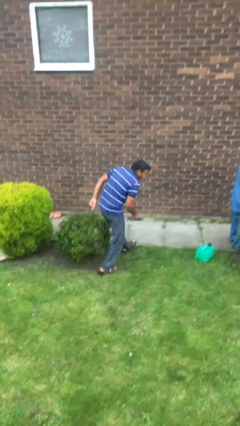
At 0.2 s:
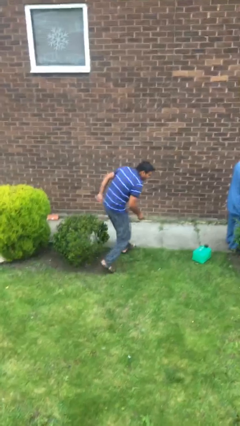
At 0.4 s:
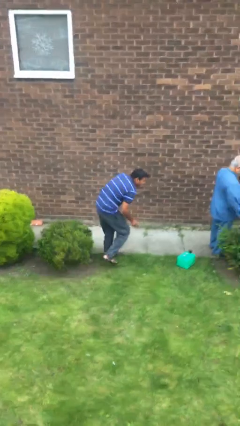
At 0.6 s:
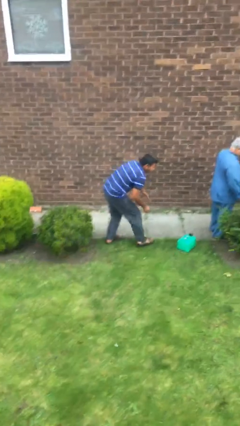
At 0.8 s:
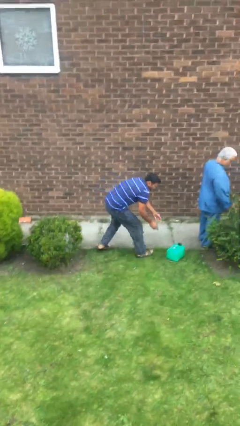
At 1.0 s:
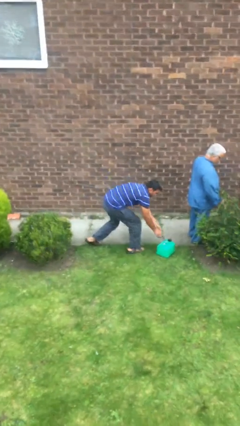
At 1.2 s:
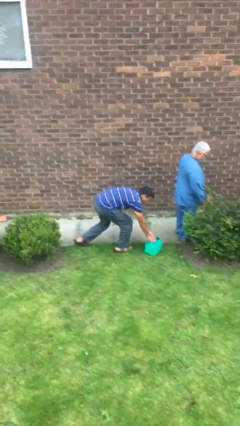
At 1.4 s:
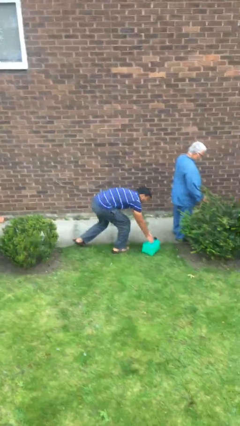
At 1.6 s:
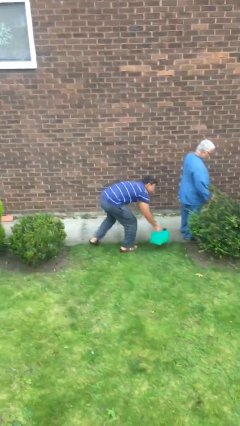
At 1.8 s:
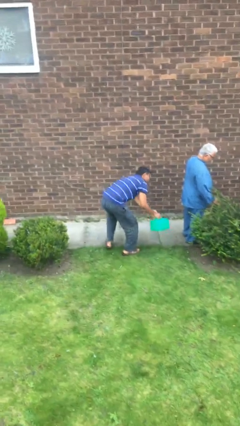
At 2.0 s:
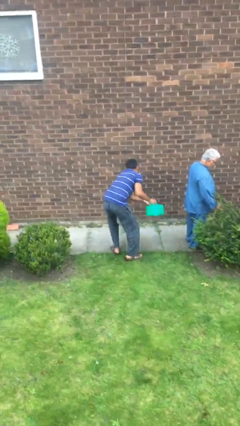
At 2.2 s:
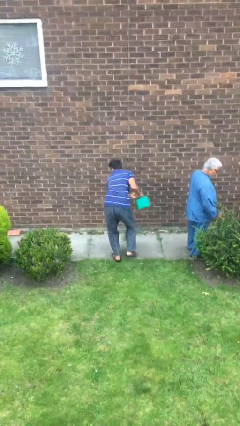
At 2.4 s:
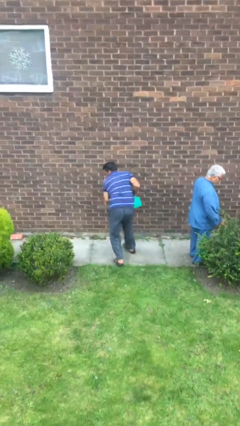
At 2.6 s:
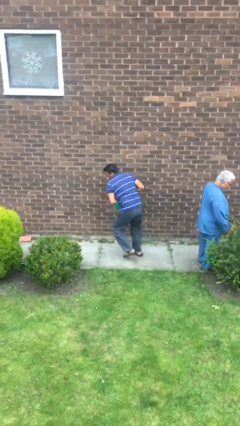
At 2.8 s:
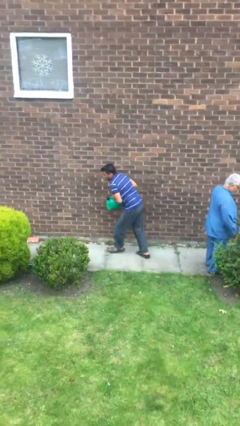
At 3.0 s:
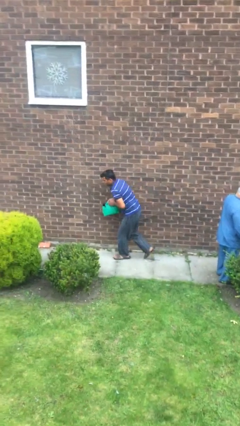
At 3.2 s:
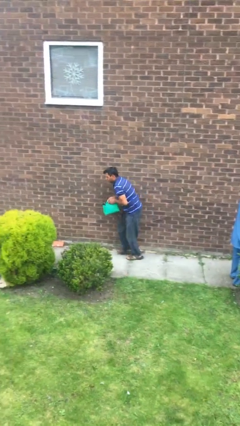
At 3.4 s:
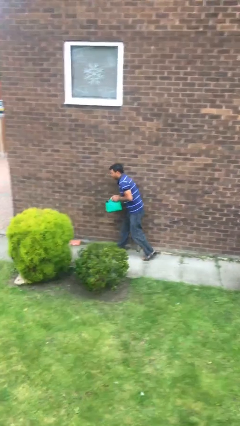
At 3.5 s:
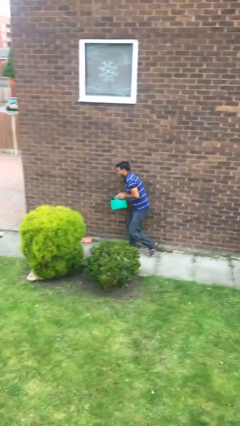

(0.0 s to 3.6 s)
person steals object from person

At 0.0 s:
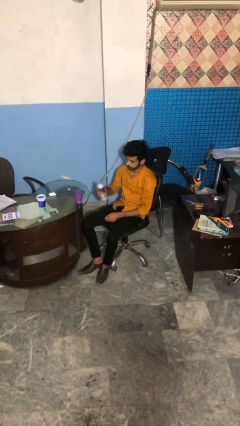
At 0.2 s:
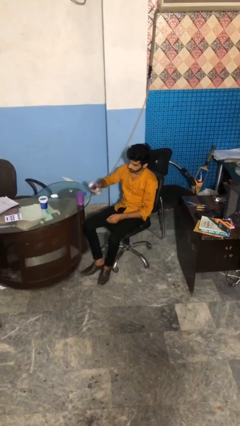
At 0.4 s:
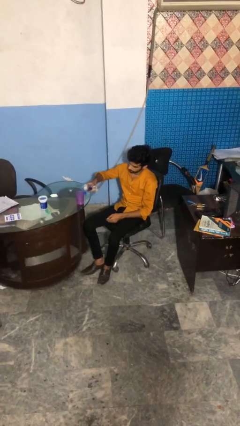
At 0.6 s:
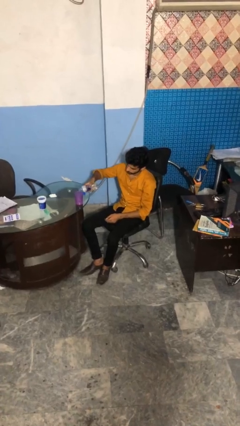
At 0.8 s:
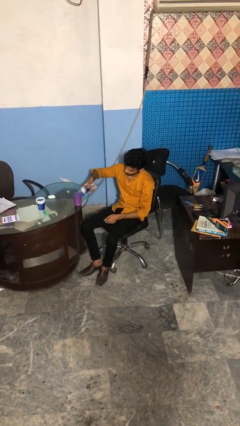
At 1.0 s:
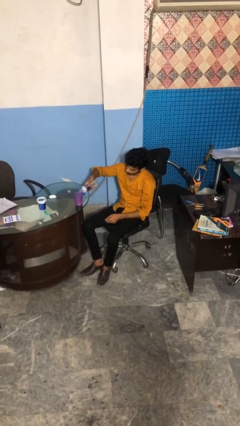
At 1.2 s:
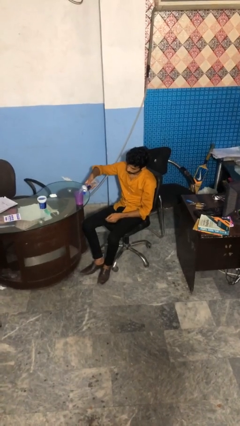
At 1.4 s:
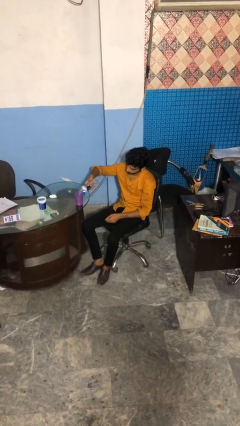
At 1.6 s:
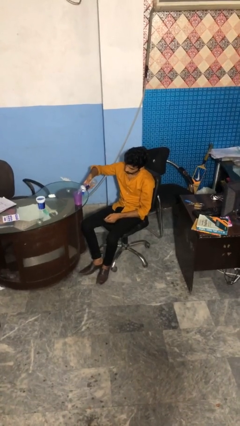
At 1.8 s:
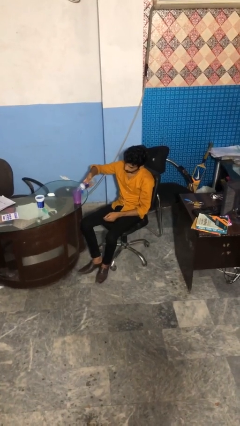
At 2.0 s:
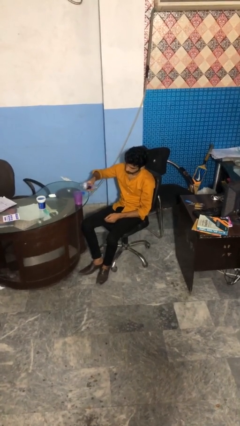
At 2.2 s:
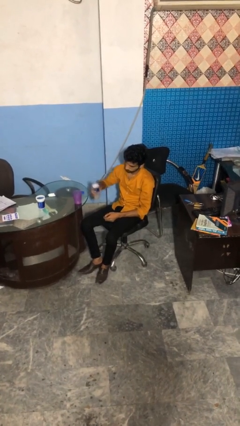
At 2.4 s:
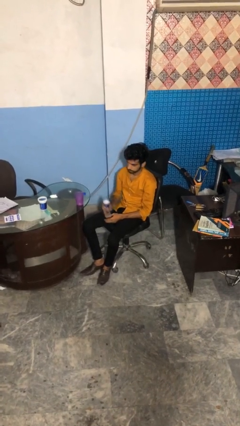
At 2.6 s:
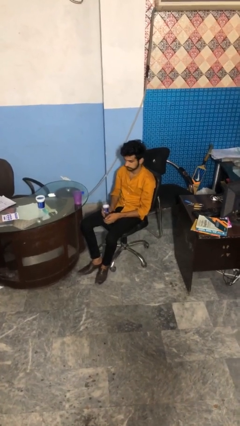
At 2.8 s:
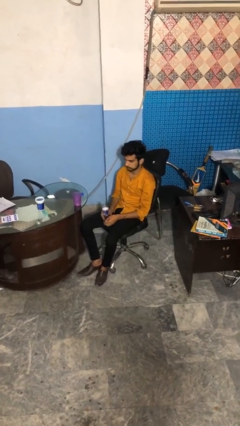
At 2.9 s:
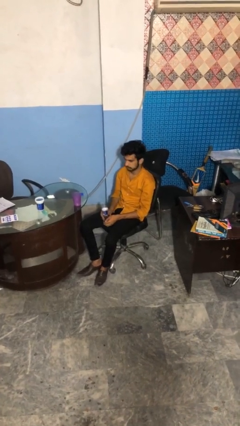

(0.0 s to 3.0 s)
person pours liquid into cup

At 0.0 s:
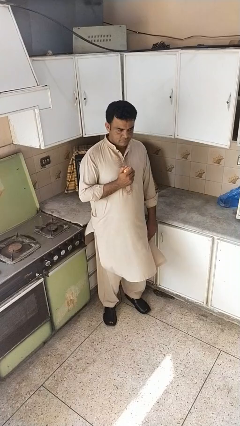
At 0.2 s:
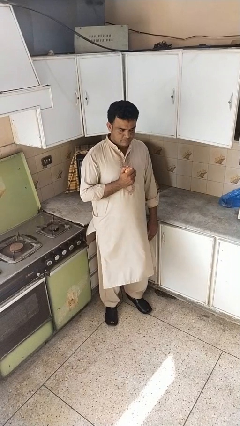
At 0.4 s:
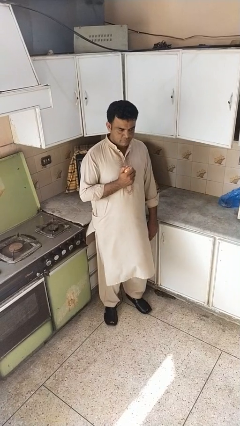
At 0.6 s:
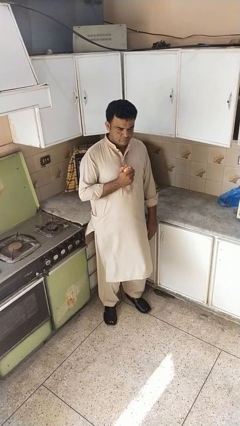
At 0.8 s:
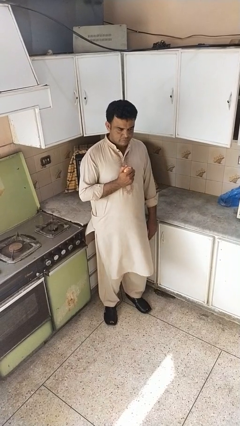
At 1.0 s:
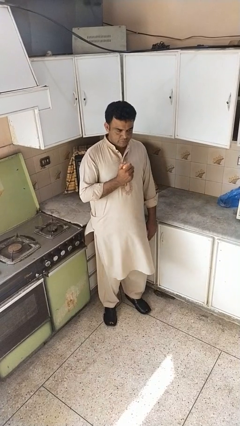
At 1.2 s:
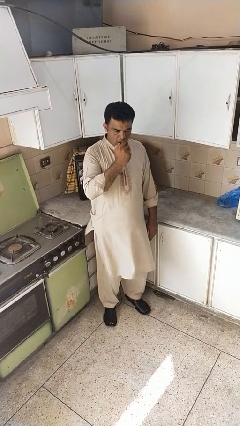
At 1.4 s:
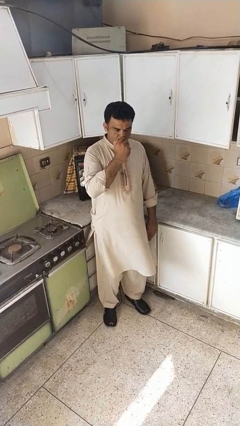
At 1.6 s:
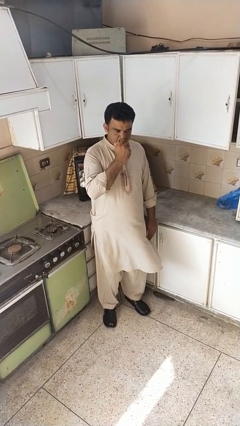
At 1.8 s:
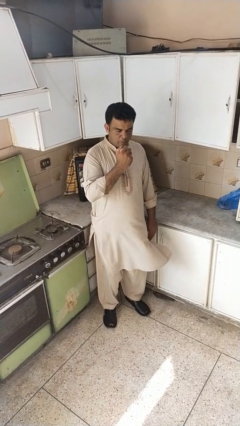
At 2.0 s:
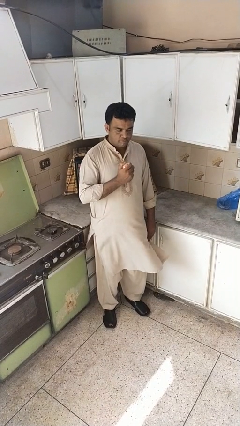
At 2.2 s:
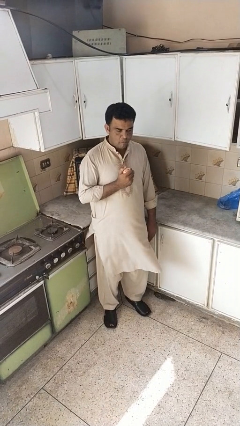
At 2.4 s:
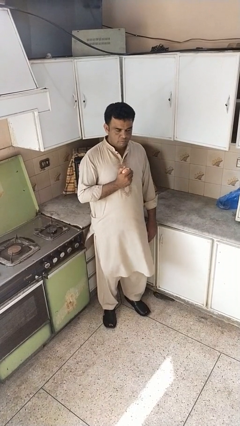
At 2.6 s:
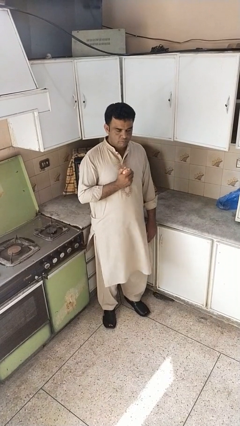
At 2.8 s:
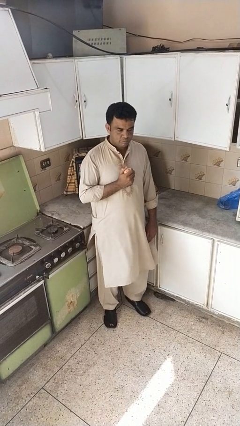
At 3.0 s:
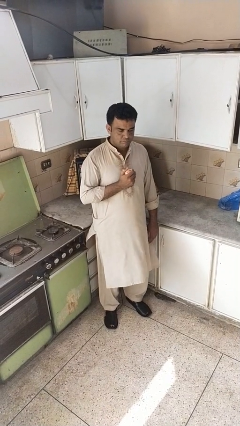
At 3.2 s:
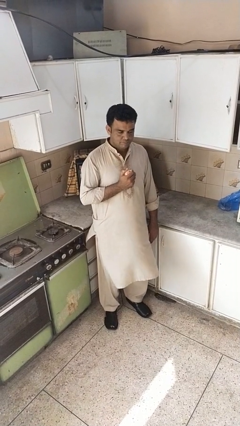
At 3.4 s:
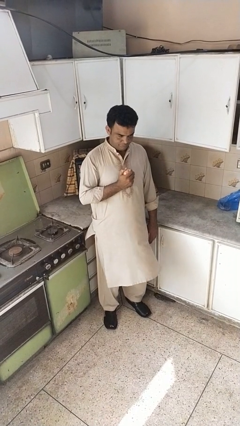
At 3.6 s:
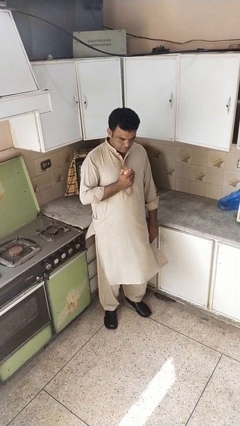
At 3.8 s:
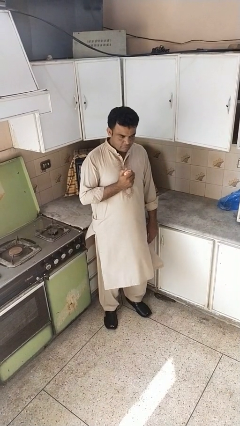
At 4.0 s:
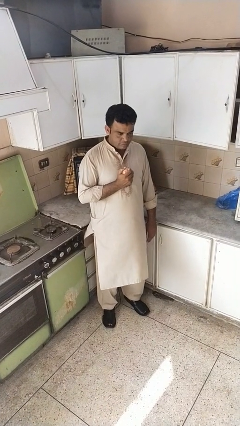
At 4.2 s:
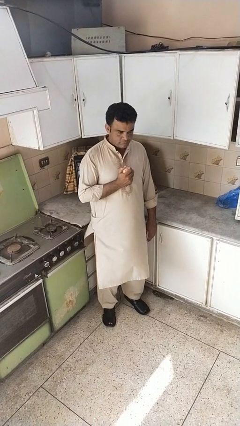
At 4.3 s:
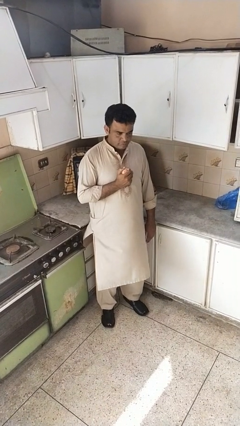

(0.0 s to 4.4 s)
person eats apple

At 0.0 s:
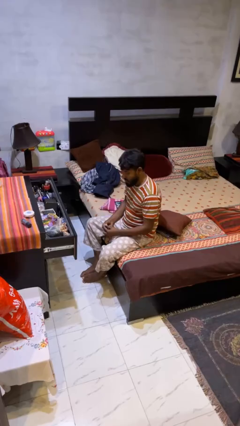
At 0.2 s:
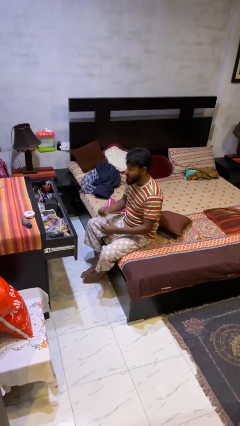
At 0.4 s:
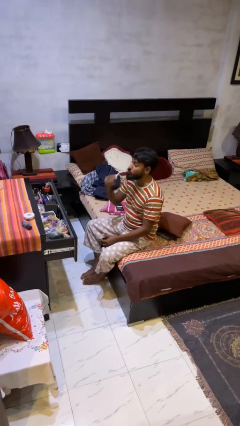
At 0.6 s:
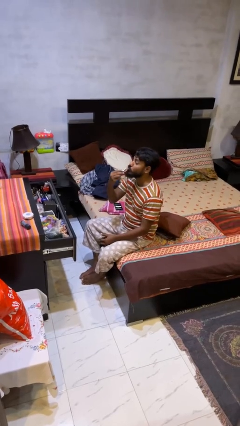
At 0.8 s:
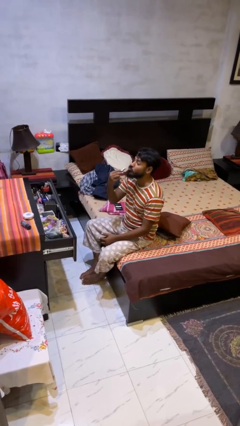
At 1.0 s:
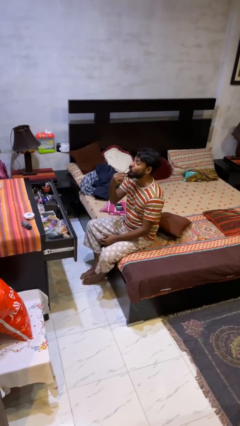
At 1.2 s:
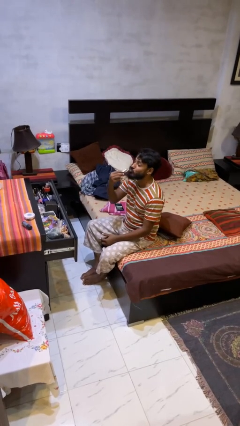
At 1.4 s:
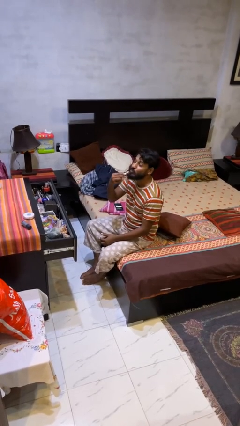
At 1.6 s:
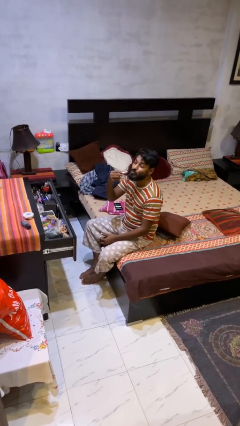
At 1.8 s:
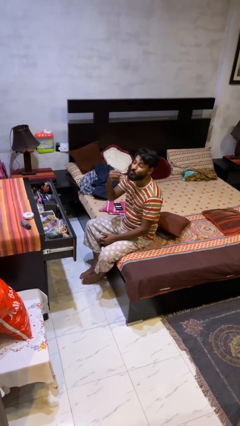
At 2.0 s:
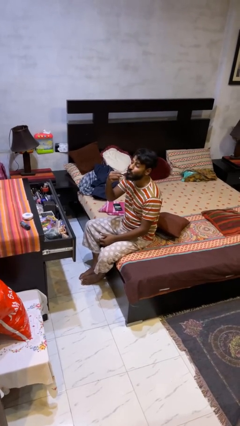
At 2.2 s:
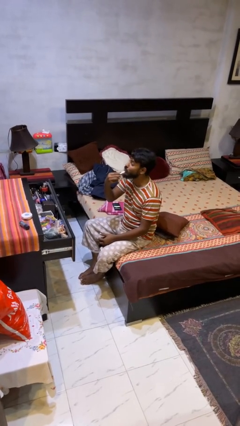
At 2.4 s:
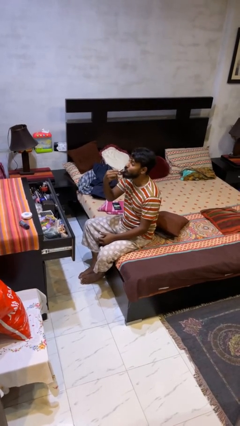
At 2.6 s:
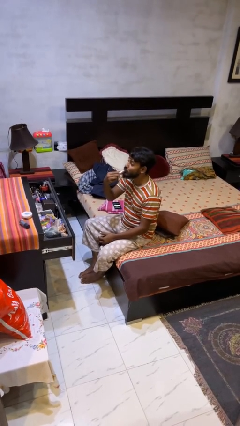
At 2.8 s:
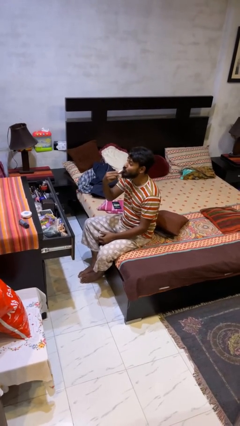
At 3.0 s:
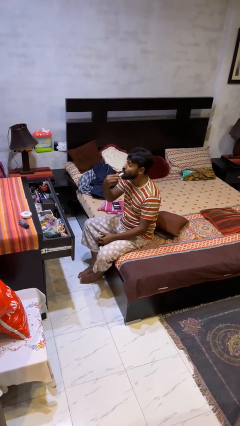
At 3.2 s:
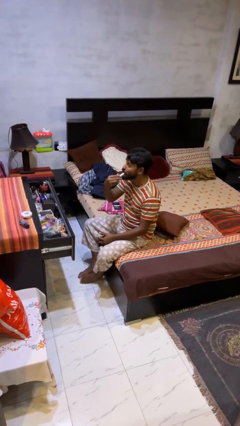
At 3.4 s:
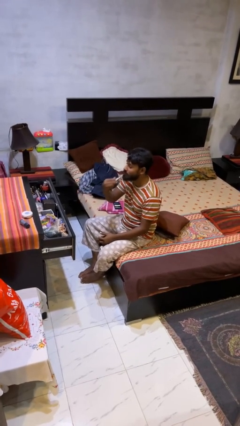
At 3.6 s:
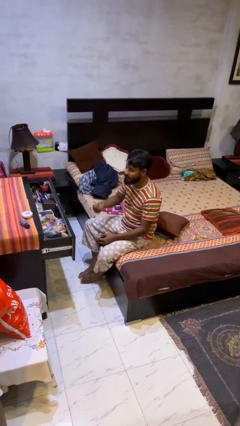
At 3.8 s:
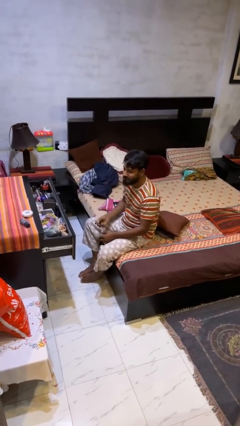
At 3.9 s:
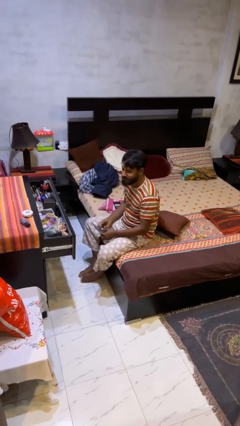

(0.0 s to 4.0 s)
person applies lip makeup

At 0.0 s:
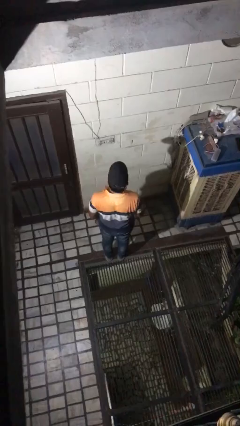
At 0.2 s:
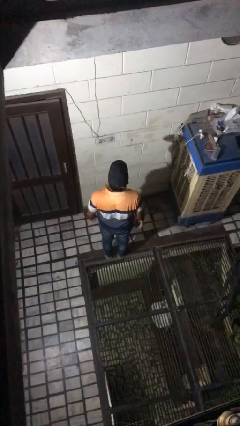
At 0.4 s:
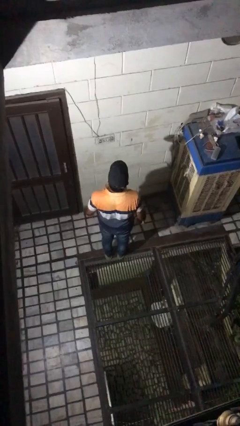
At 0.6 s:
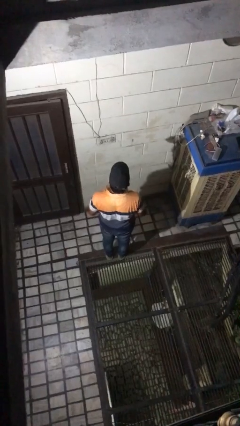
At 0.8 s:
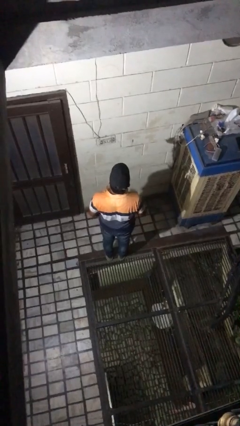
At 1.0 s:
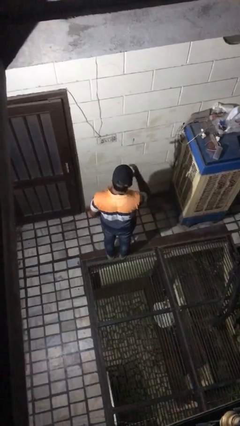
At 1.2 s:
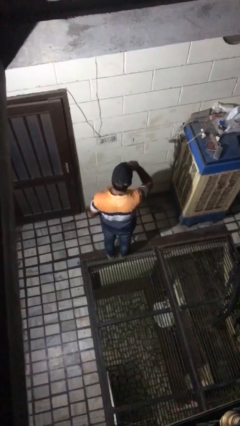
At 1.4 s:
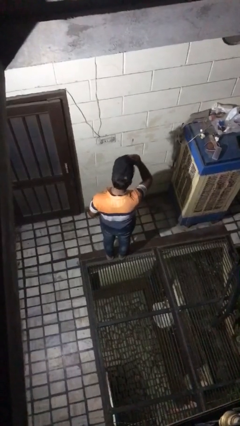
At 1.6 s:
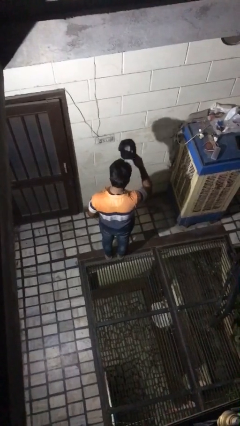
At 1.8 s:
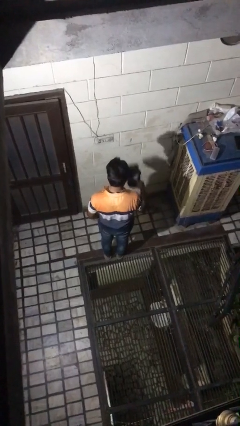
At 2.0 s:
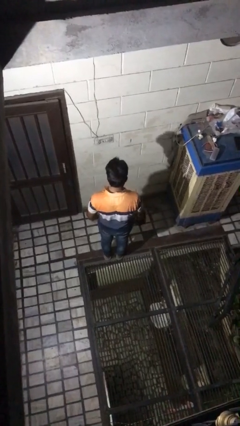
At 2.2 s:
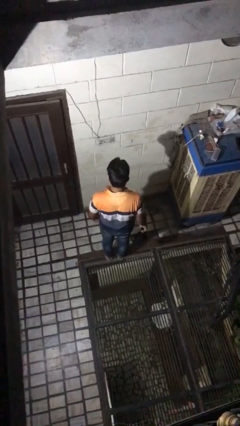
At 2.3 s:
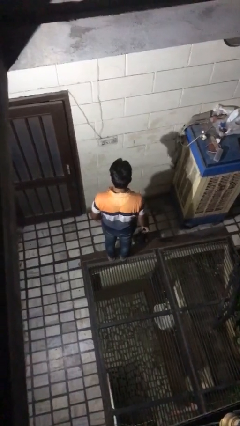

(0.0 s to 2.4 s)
person takes off hat

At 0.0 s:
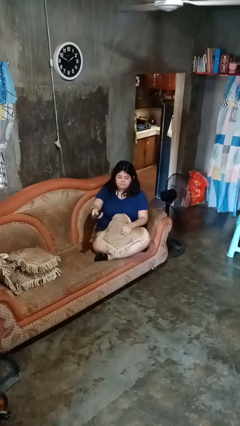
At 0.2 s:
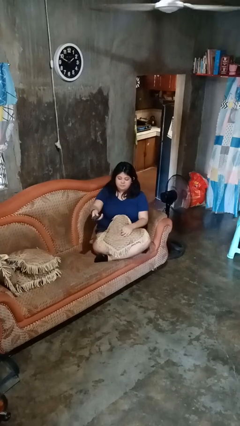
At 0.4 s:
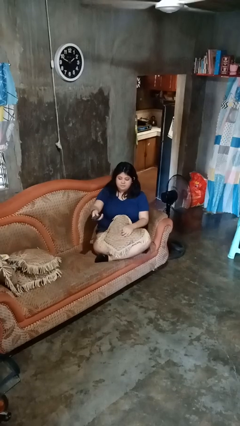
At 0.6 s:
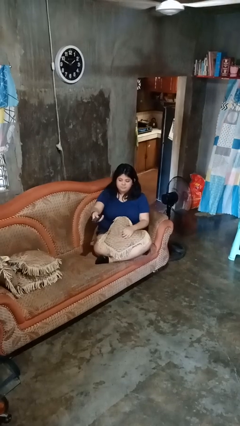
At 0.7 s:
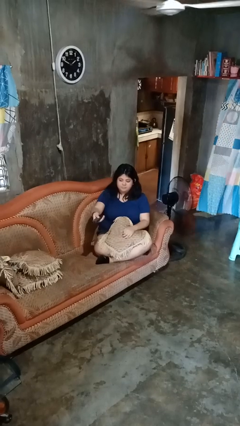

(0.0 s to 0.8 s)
person uses television remote
